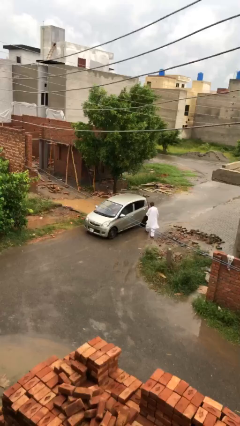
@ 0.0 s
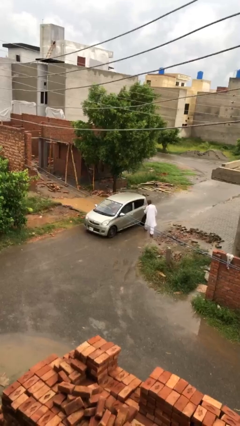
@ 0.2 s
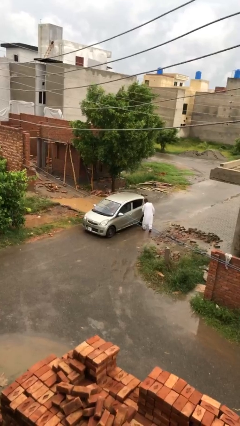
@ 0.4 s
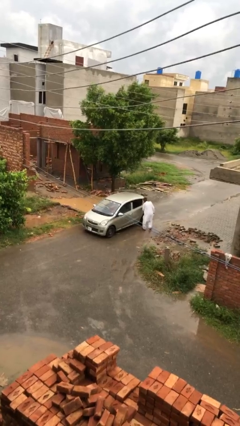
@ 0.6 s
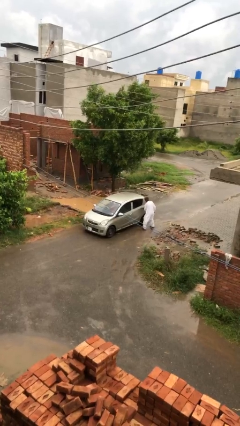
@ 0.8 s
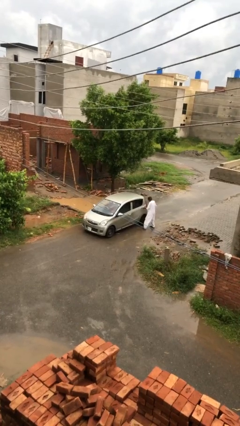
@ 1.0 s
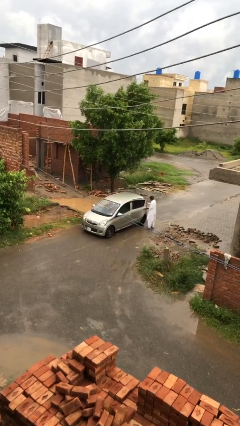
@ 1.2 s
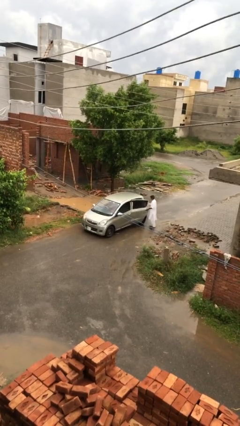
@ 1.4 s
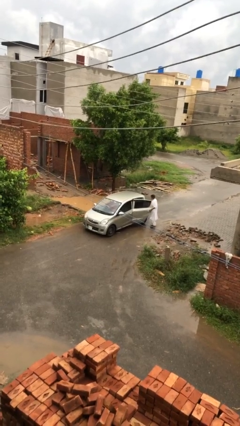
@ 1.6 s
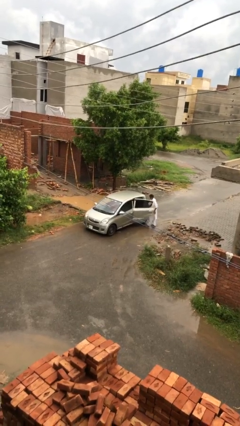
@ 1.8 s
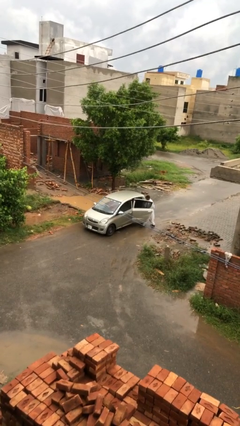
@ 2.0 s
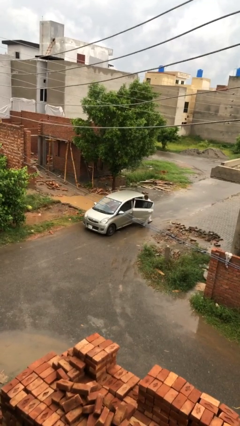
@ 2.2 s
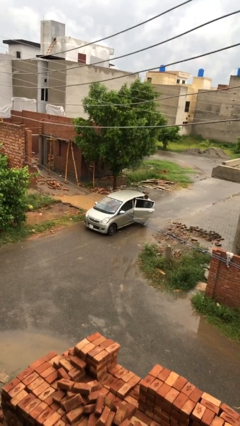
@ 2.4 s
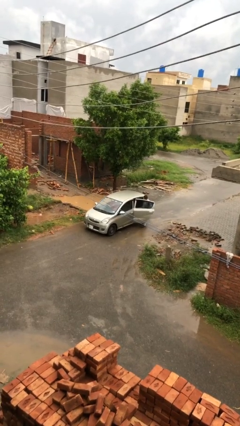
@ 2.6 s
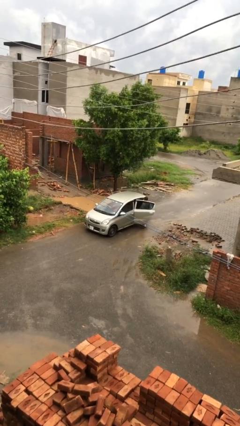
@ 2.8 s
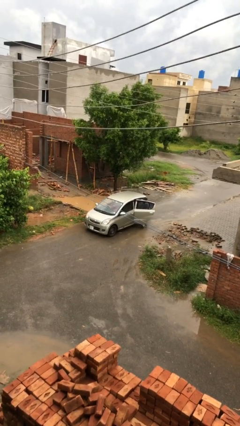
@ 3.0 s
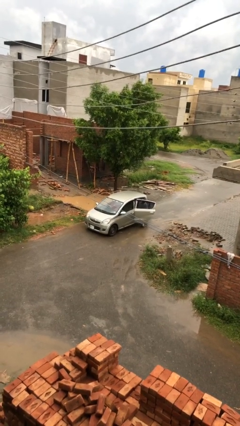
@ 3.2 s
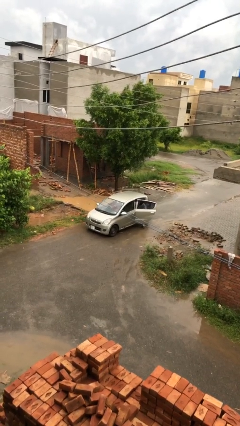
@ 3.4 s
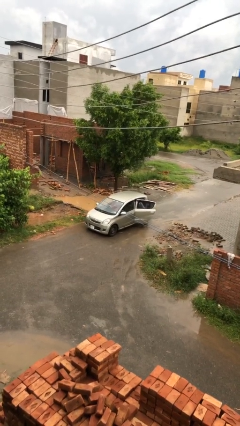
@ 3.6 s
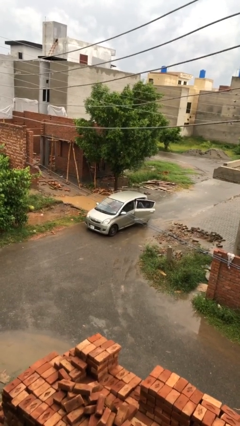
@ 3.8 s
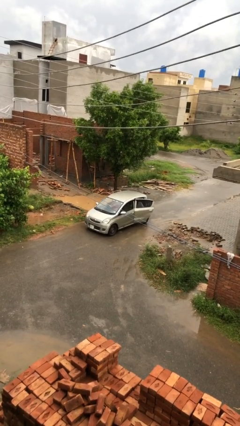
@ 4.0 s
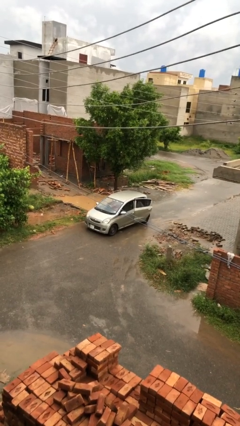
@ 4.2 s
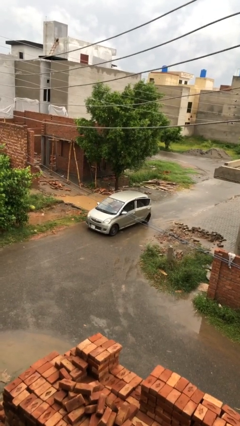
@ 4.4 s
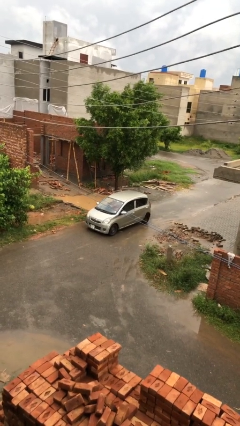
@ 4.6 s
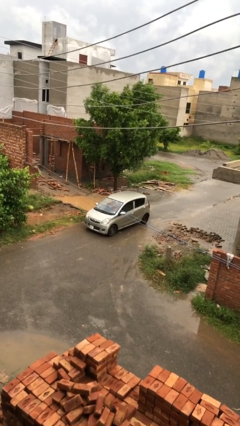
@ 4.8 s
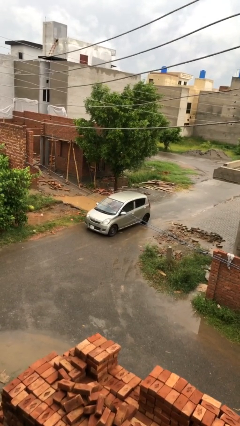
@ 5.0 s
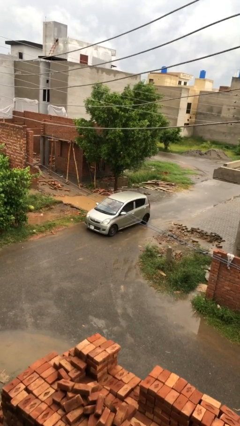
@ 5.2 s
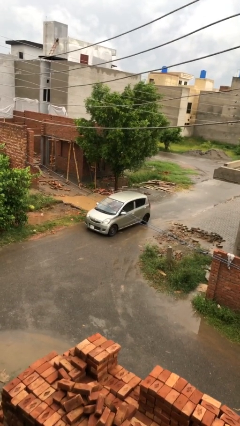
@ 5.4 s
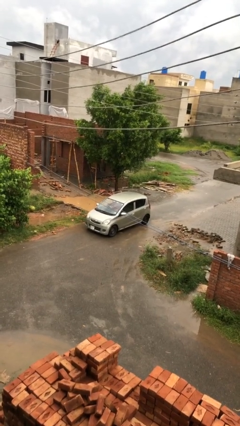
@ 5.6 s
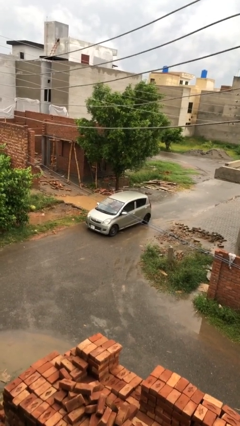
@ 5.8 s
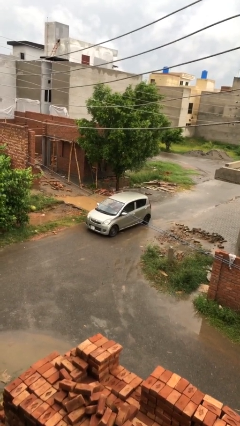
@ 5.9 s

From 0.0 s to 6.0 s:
car picks up person

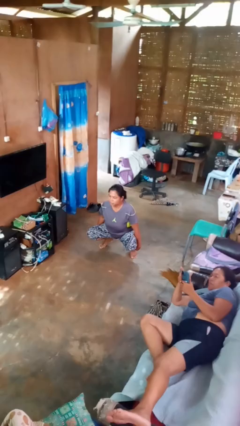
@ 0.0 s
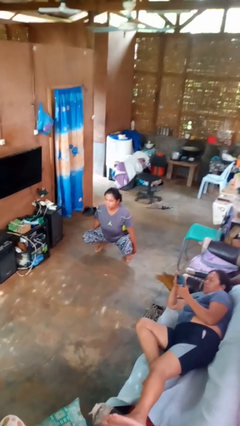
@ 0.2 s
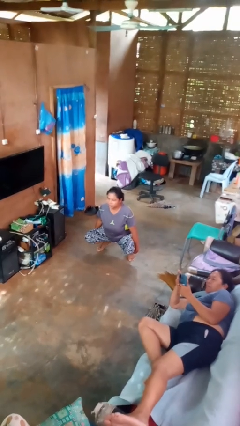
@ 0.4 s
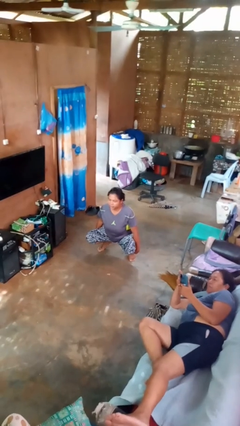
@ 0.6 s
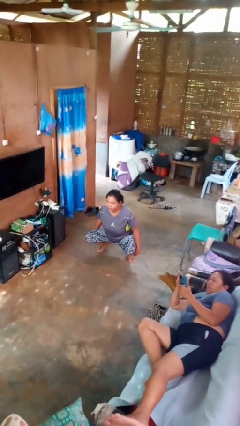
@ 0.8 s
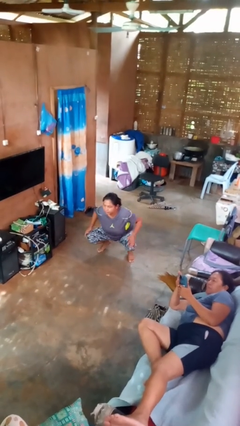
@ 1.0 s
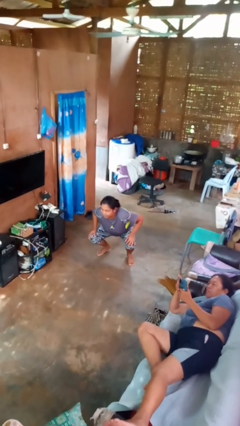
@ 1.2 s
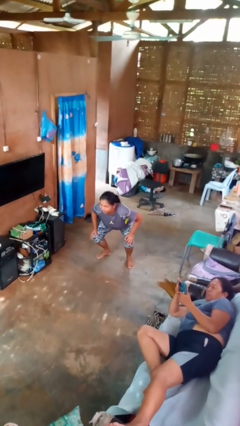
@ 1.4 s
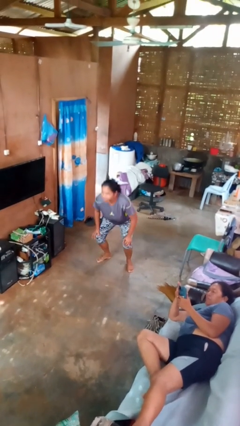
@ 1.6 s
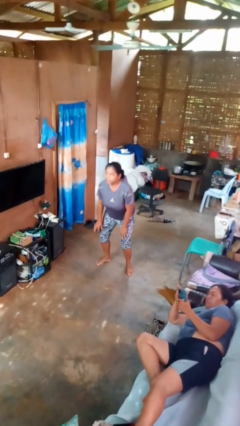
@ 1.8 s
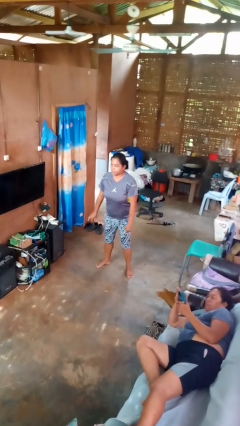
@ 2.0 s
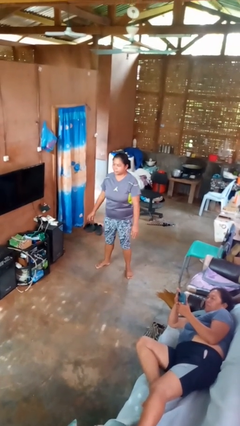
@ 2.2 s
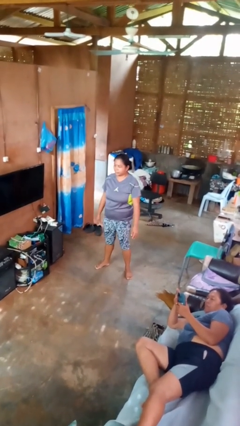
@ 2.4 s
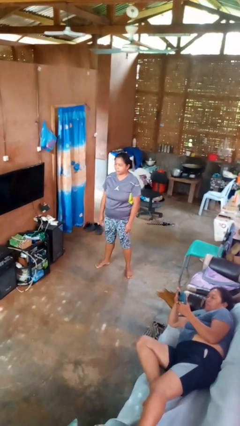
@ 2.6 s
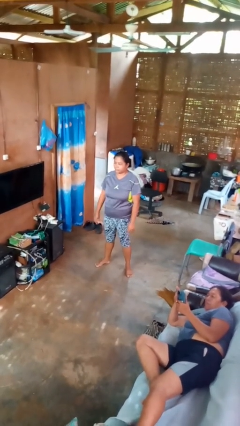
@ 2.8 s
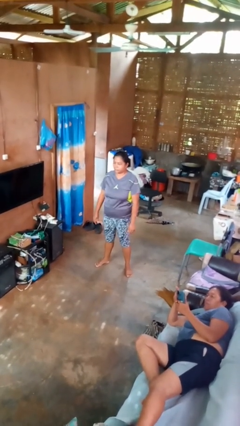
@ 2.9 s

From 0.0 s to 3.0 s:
person stands up

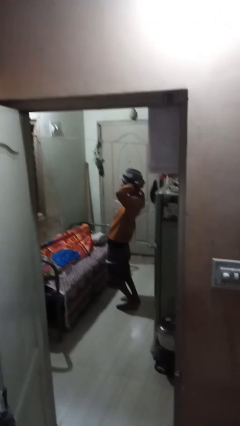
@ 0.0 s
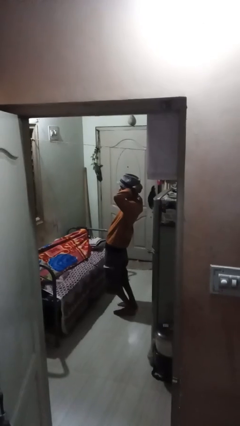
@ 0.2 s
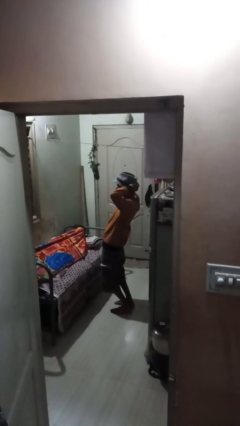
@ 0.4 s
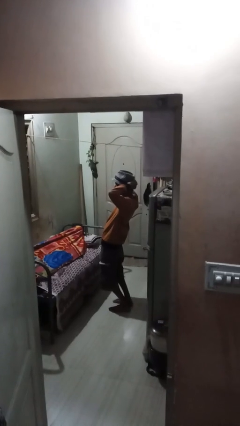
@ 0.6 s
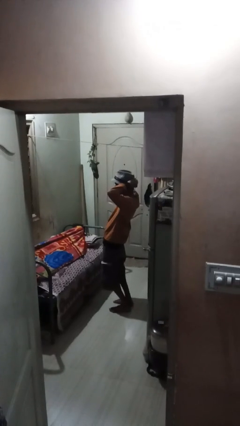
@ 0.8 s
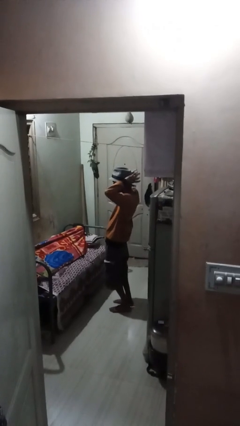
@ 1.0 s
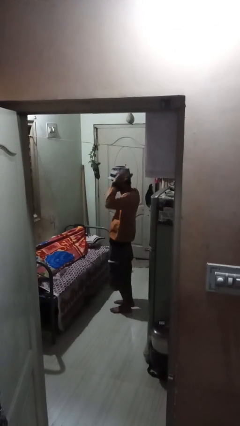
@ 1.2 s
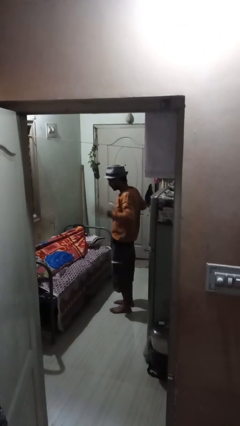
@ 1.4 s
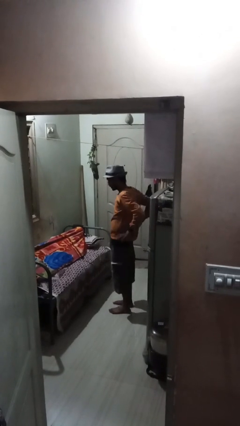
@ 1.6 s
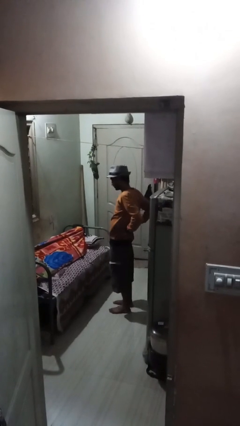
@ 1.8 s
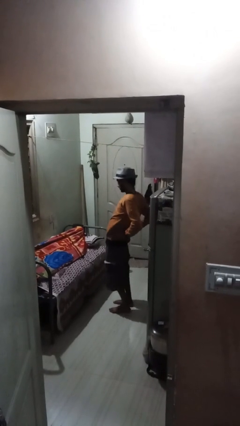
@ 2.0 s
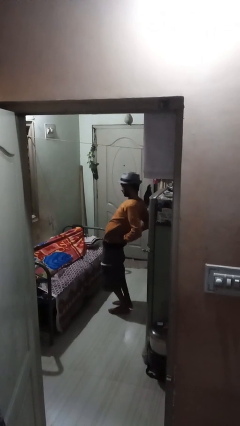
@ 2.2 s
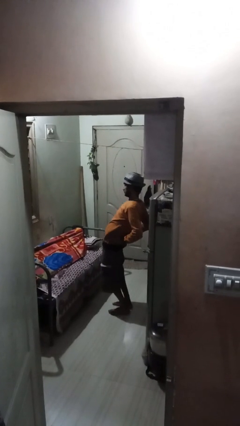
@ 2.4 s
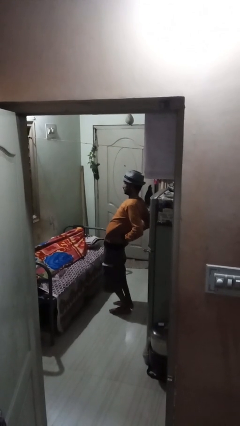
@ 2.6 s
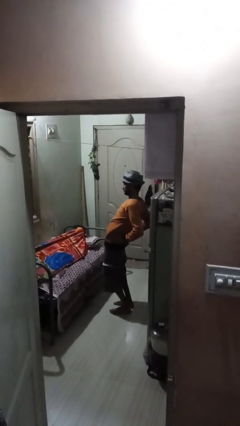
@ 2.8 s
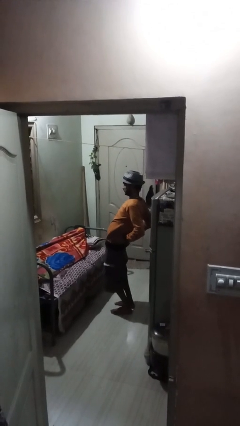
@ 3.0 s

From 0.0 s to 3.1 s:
person stretches back

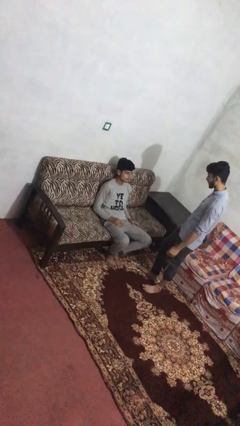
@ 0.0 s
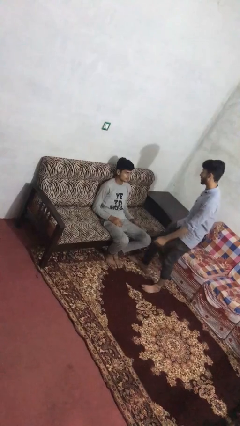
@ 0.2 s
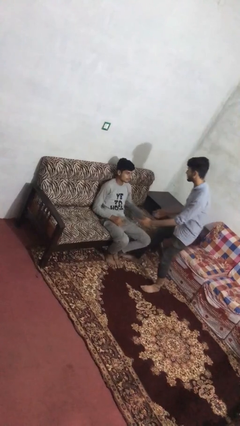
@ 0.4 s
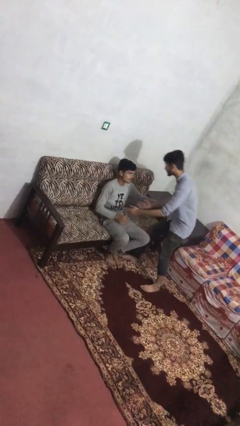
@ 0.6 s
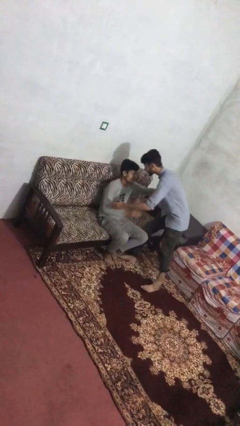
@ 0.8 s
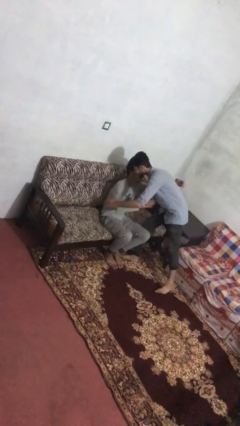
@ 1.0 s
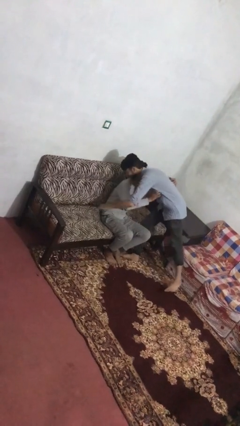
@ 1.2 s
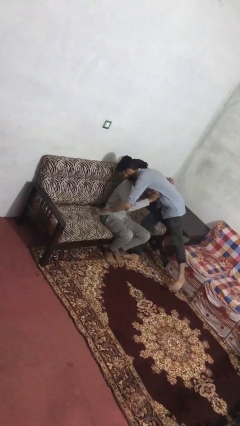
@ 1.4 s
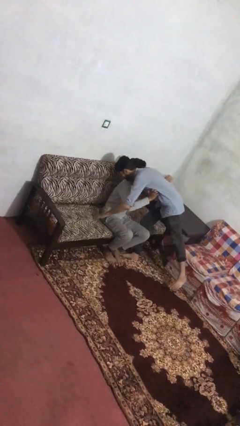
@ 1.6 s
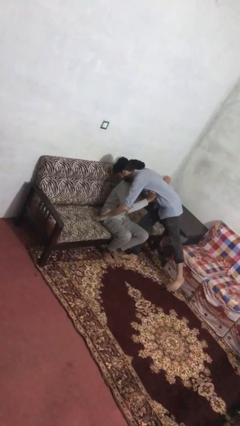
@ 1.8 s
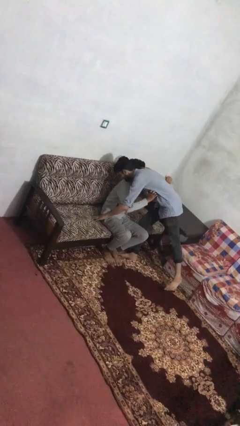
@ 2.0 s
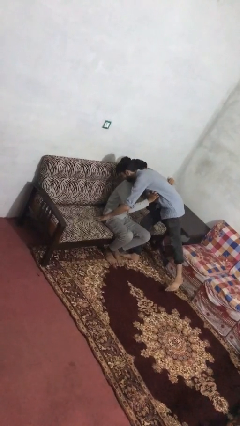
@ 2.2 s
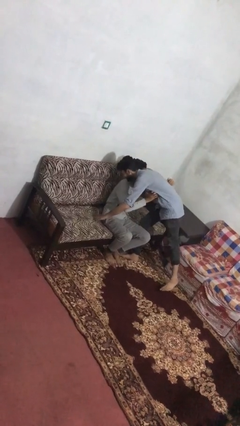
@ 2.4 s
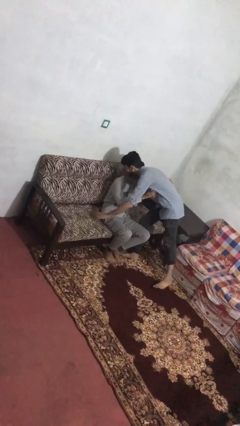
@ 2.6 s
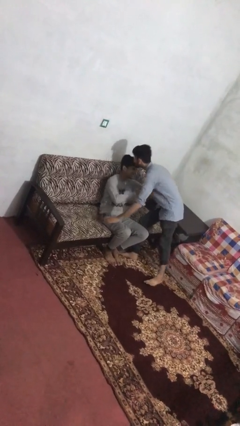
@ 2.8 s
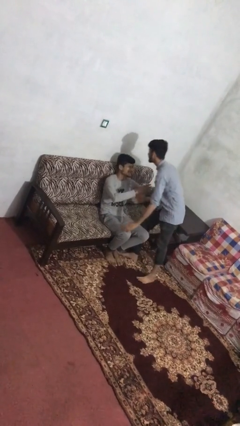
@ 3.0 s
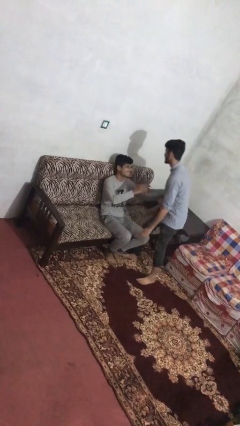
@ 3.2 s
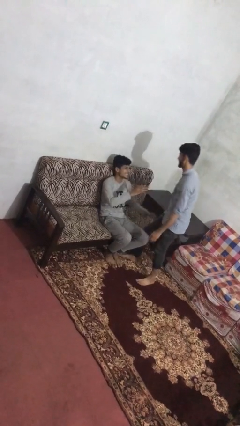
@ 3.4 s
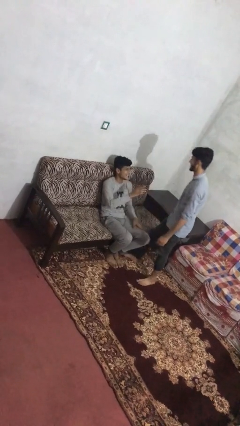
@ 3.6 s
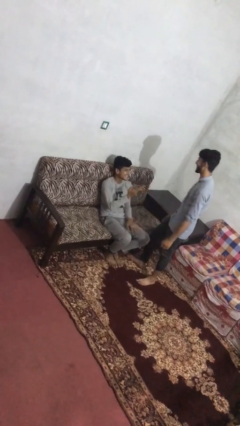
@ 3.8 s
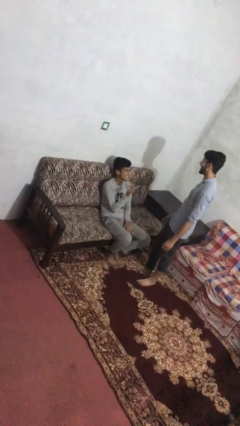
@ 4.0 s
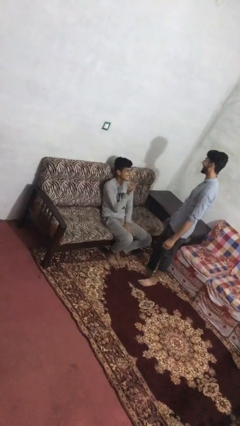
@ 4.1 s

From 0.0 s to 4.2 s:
person embraces person

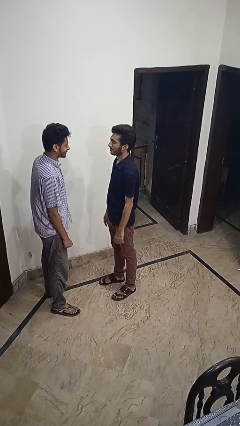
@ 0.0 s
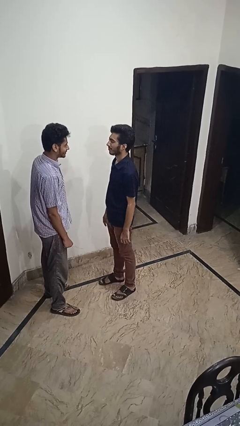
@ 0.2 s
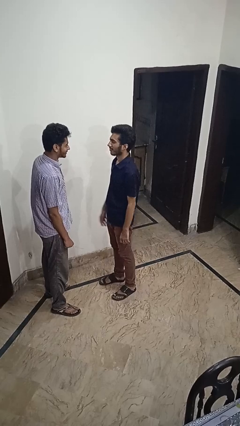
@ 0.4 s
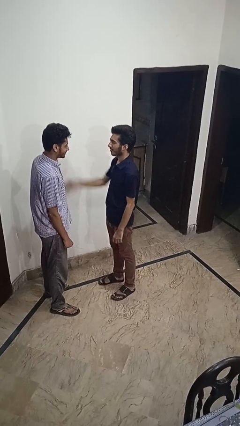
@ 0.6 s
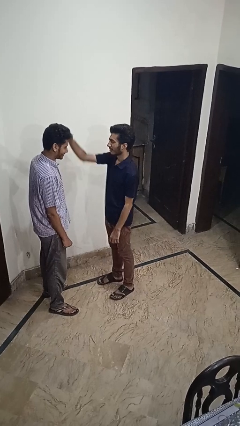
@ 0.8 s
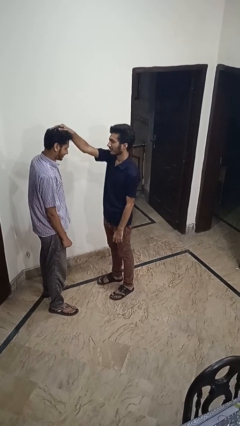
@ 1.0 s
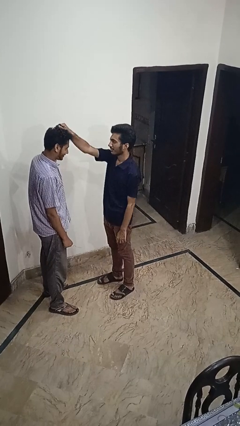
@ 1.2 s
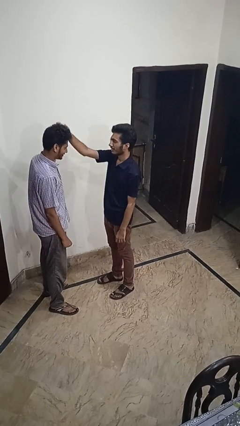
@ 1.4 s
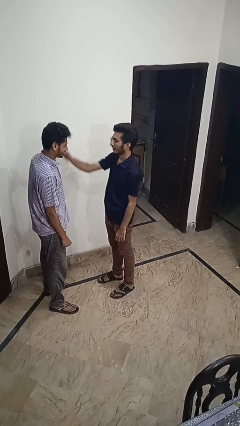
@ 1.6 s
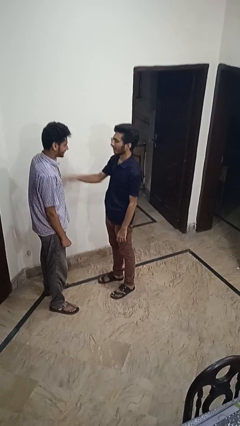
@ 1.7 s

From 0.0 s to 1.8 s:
person grabs person by hair
